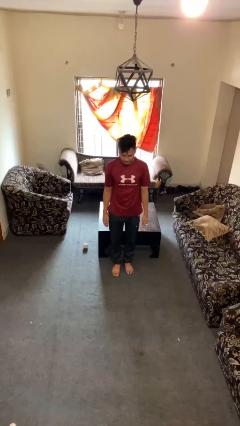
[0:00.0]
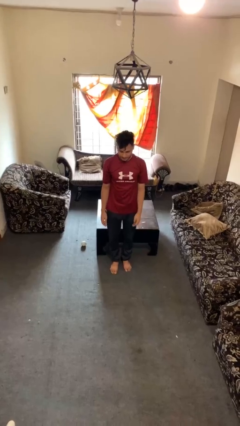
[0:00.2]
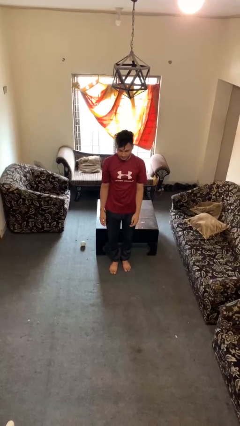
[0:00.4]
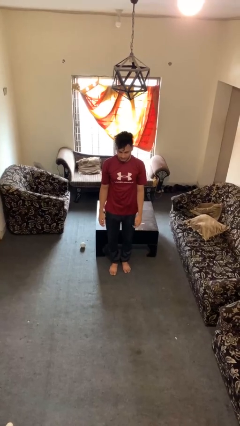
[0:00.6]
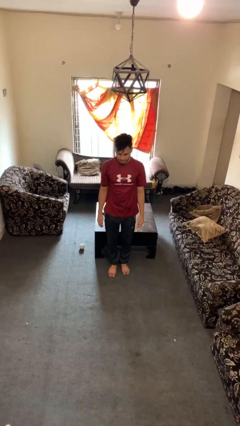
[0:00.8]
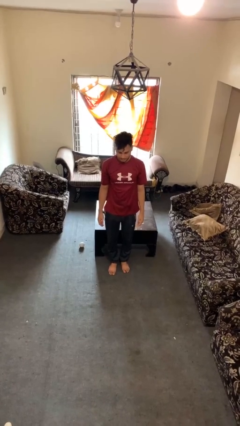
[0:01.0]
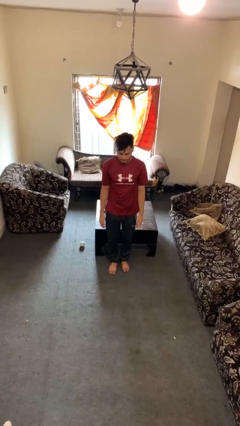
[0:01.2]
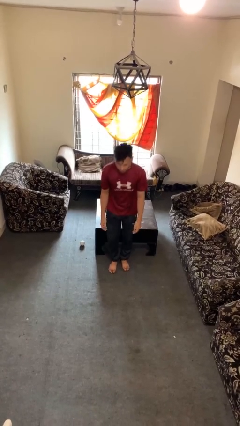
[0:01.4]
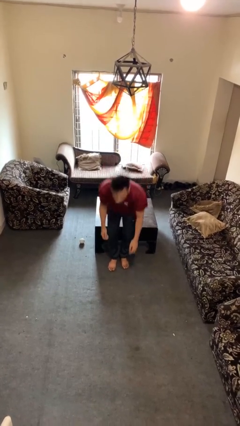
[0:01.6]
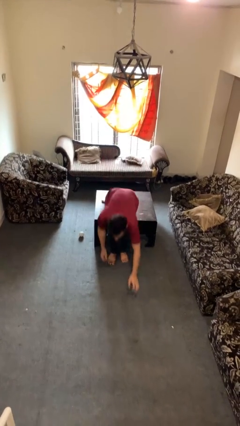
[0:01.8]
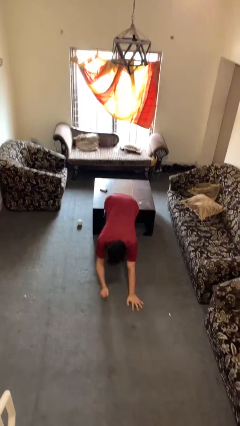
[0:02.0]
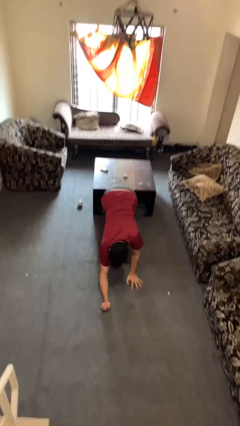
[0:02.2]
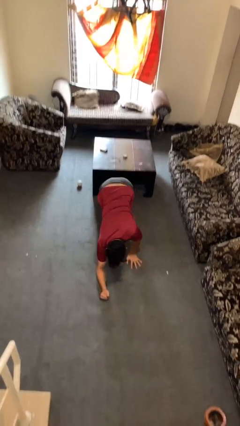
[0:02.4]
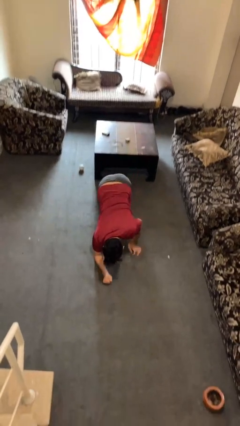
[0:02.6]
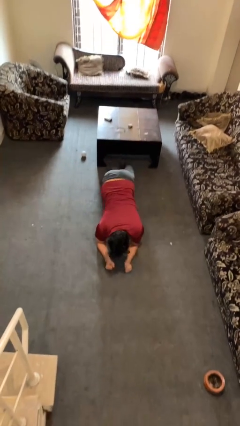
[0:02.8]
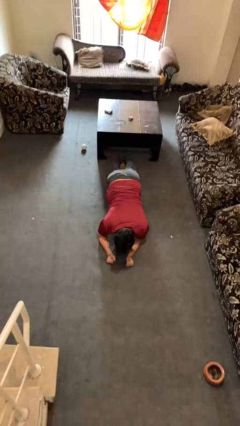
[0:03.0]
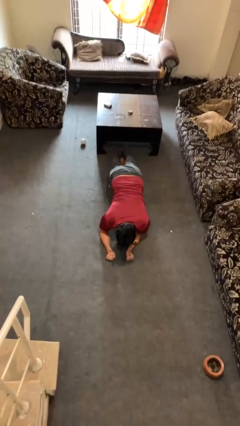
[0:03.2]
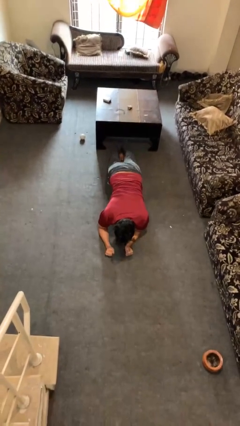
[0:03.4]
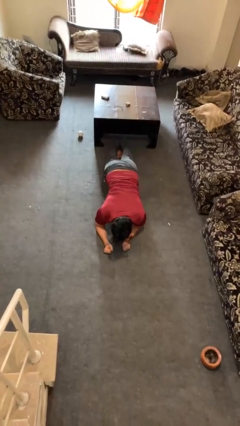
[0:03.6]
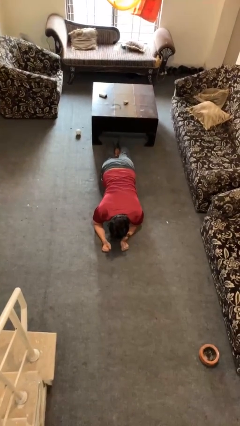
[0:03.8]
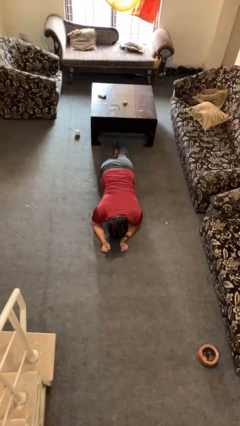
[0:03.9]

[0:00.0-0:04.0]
person exercises with plank

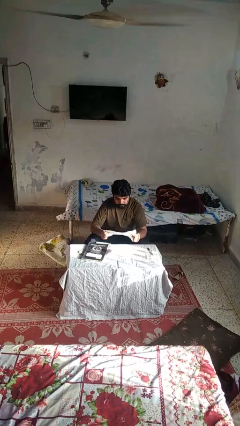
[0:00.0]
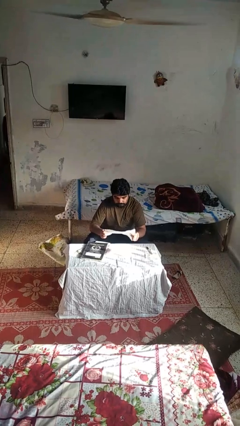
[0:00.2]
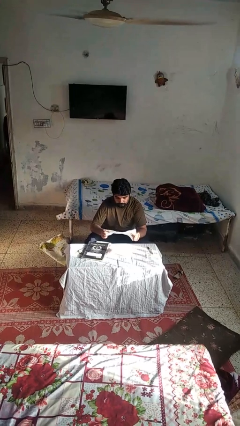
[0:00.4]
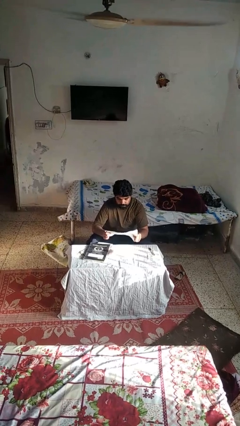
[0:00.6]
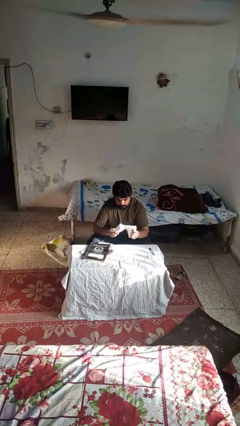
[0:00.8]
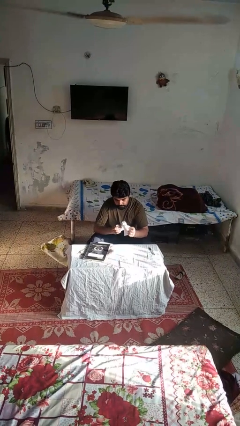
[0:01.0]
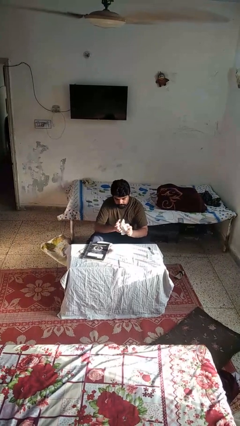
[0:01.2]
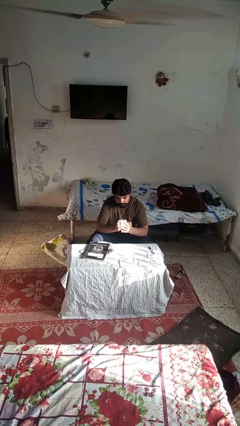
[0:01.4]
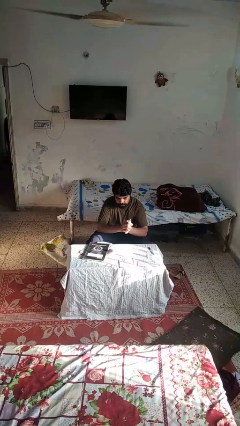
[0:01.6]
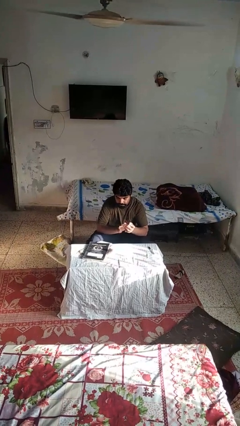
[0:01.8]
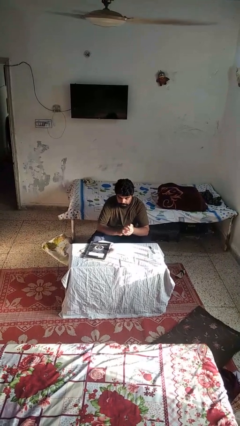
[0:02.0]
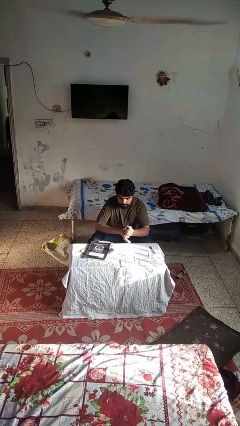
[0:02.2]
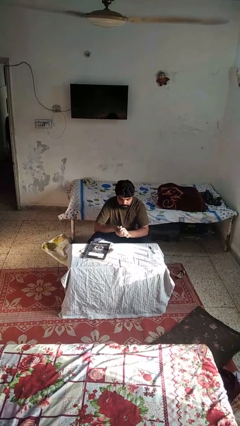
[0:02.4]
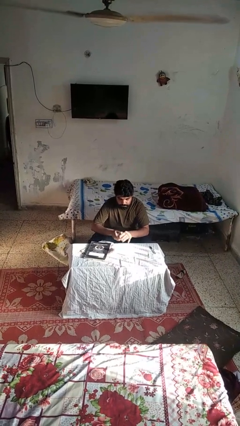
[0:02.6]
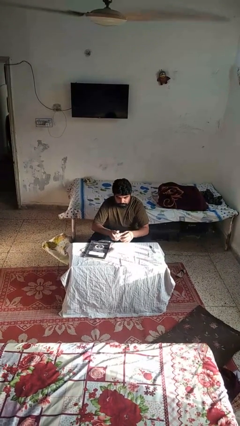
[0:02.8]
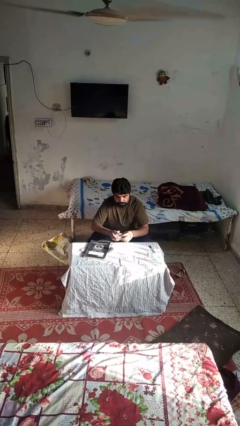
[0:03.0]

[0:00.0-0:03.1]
person crumples paper

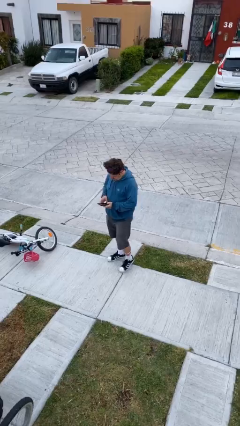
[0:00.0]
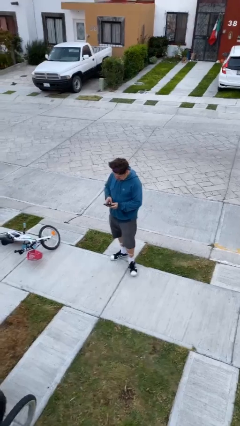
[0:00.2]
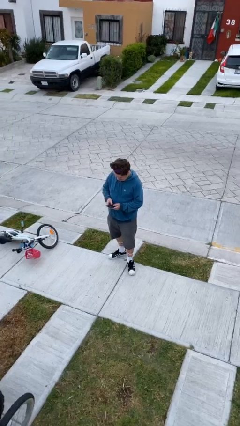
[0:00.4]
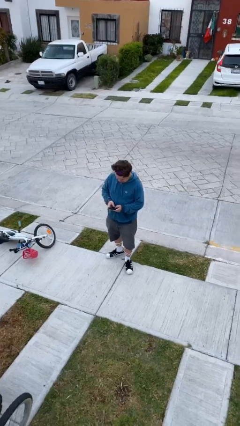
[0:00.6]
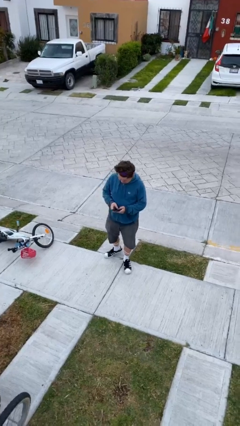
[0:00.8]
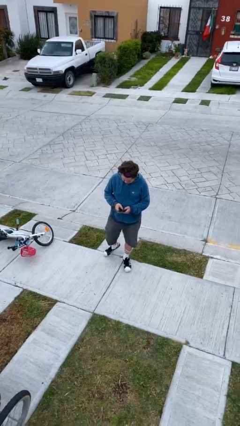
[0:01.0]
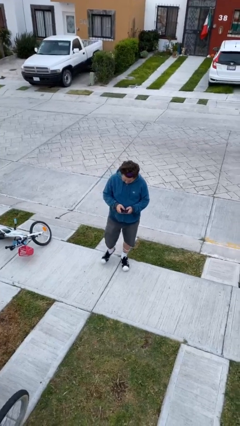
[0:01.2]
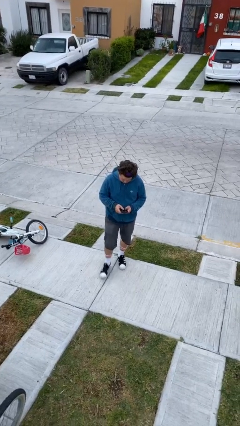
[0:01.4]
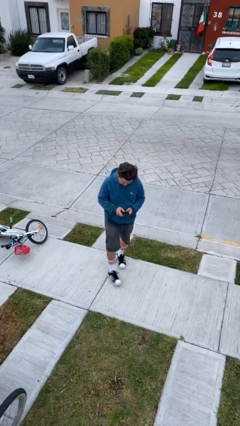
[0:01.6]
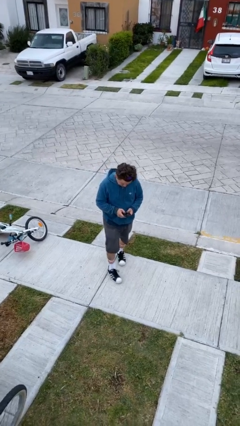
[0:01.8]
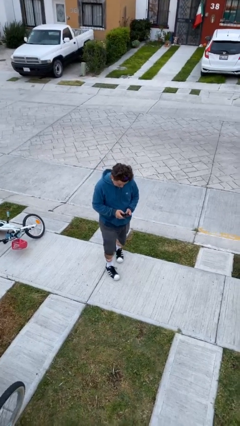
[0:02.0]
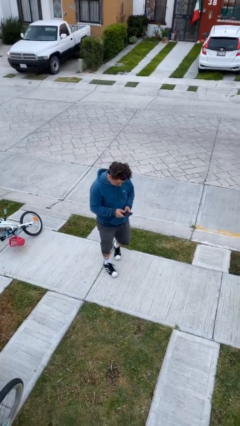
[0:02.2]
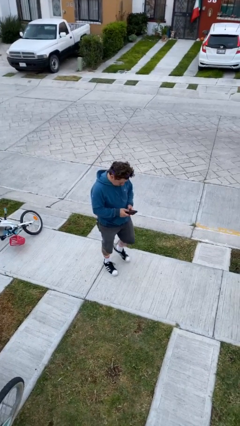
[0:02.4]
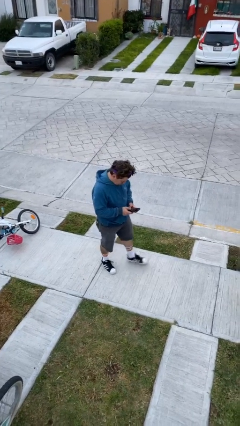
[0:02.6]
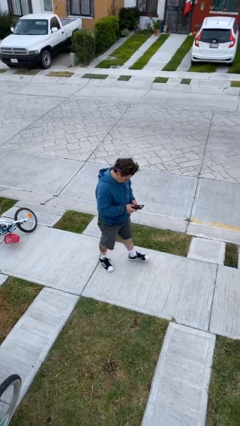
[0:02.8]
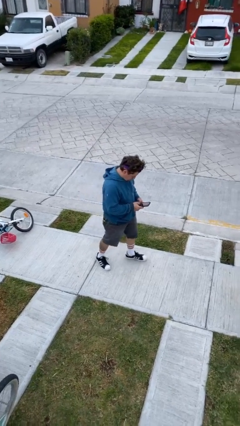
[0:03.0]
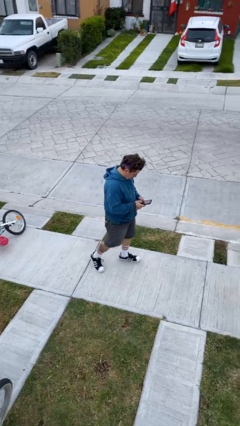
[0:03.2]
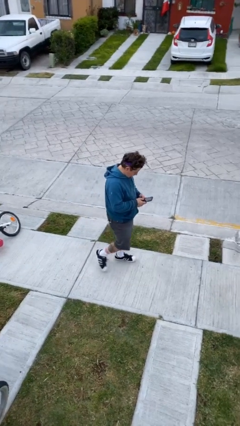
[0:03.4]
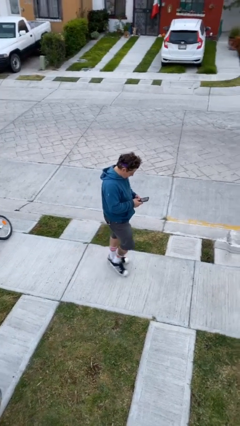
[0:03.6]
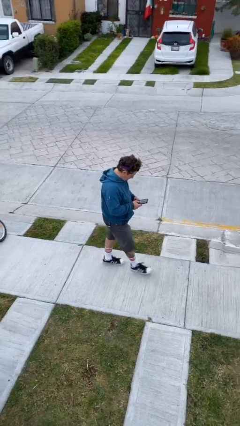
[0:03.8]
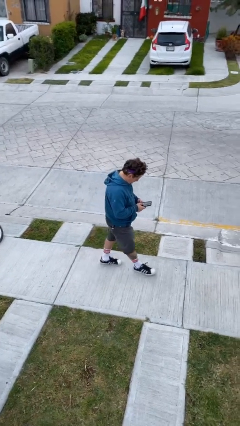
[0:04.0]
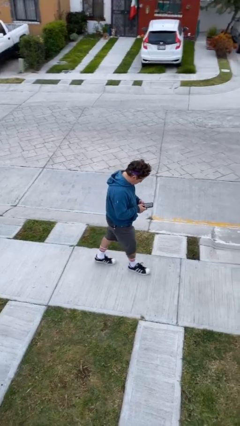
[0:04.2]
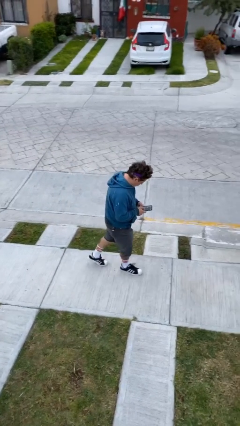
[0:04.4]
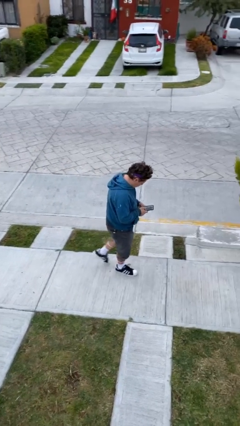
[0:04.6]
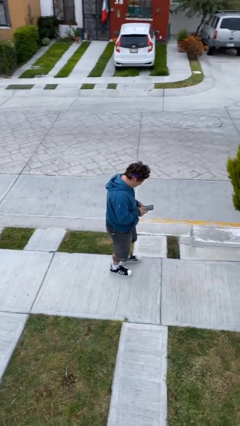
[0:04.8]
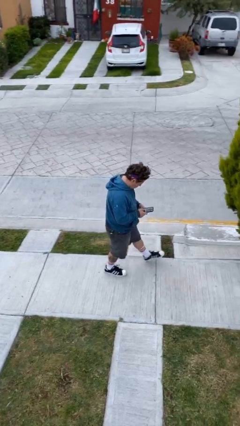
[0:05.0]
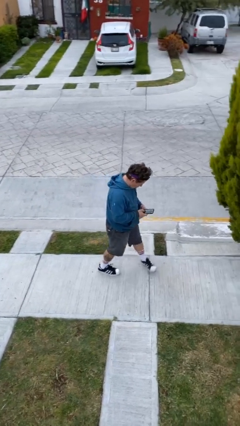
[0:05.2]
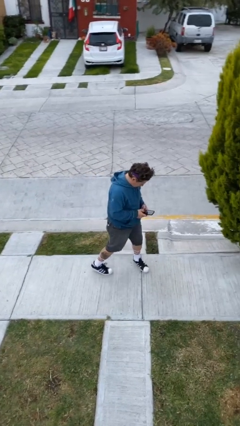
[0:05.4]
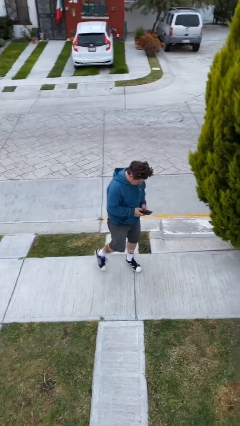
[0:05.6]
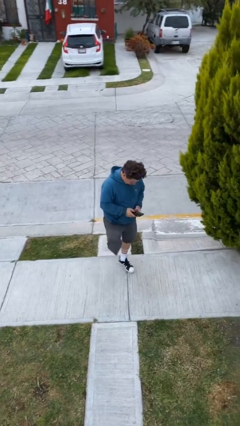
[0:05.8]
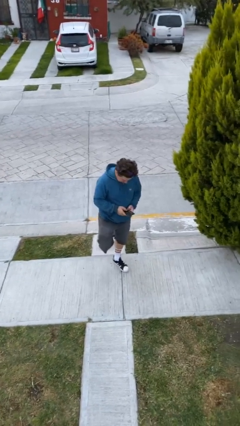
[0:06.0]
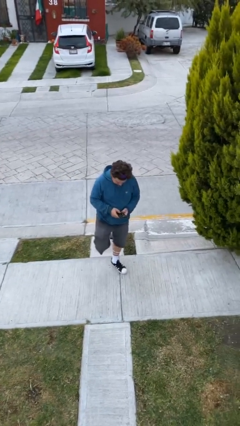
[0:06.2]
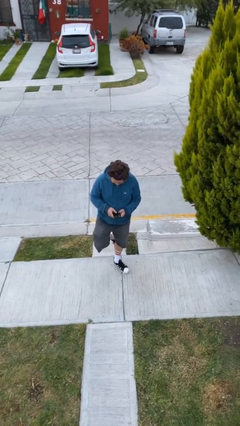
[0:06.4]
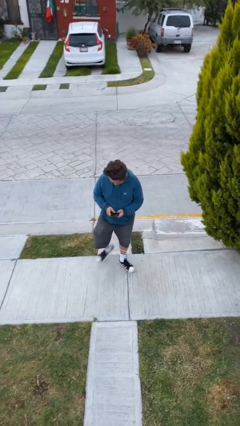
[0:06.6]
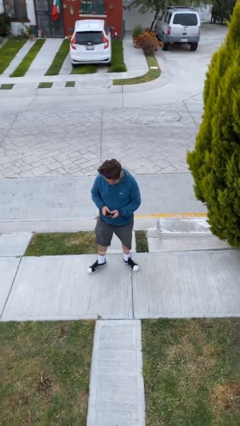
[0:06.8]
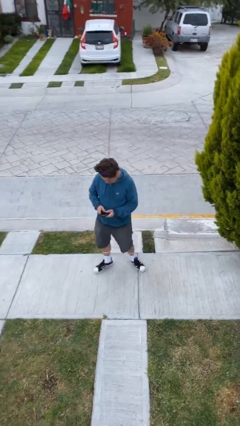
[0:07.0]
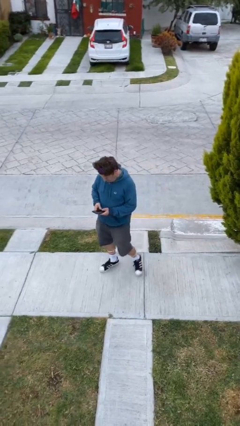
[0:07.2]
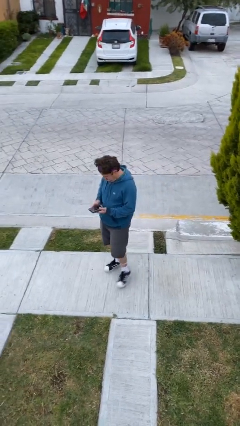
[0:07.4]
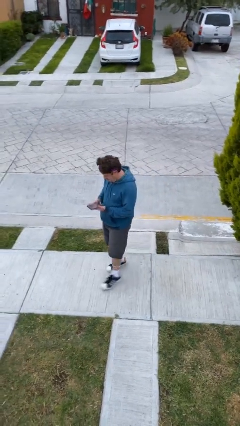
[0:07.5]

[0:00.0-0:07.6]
person texts on phone

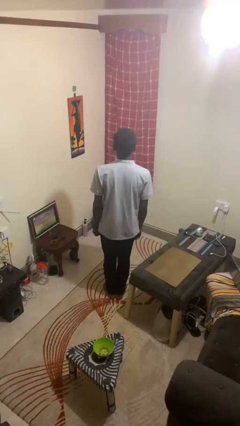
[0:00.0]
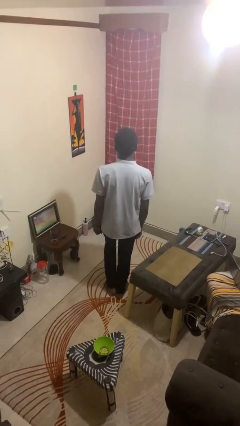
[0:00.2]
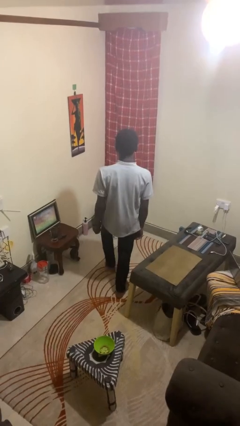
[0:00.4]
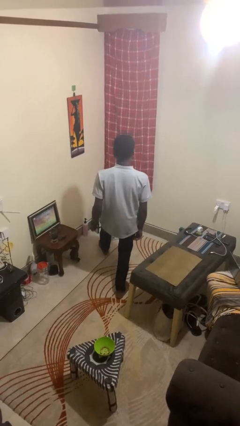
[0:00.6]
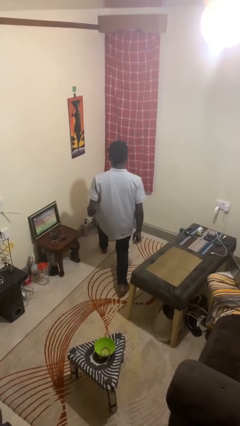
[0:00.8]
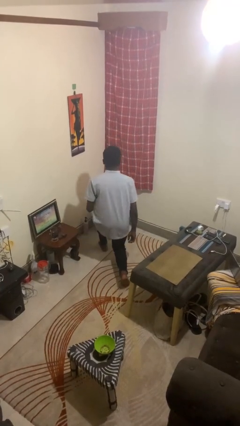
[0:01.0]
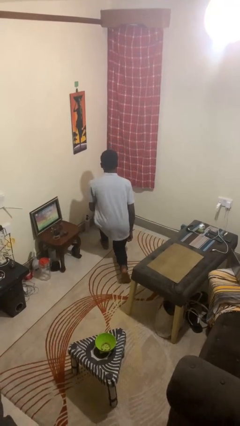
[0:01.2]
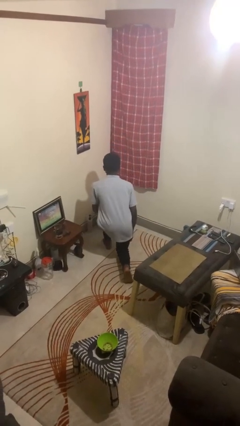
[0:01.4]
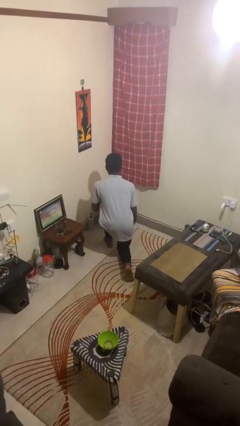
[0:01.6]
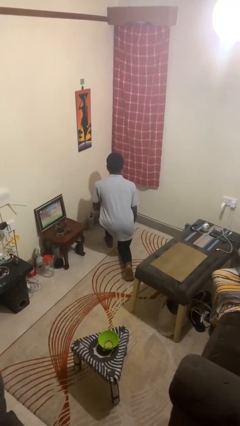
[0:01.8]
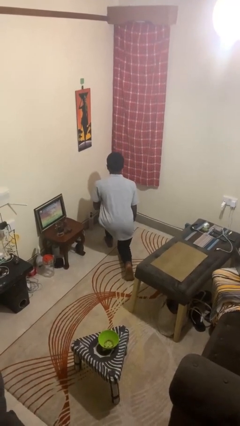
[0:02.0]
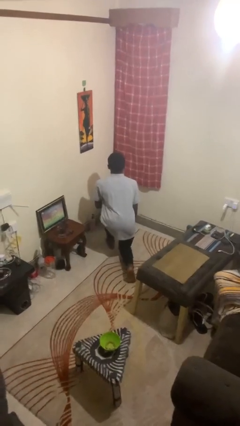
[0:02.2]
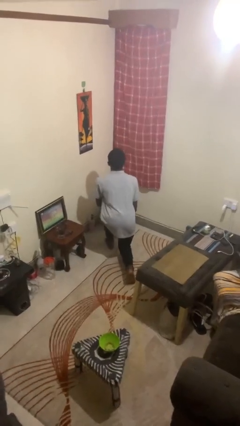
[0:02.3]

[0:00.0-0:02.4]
person exercises with lunges

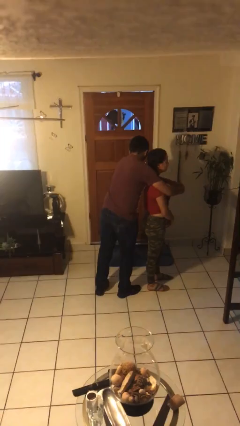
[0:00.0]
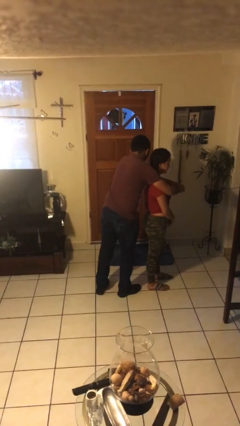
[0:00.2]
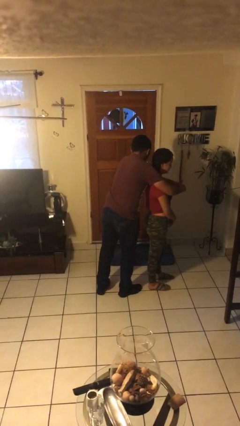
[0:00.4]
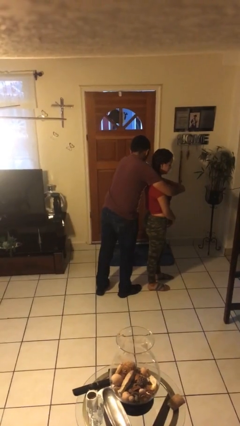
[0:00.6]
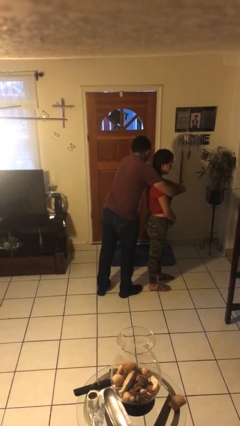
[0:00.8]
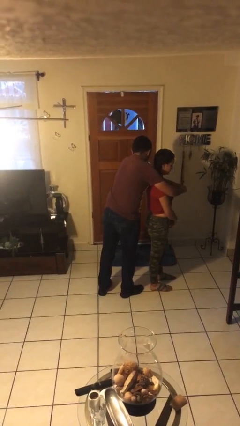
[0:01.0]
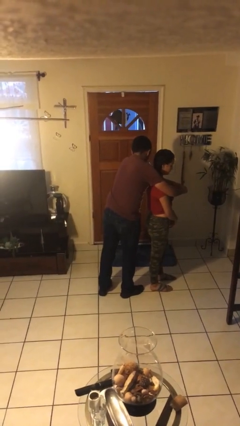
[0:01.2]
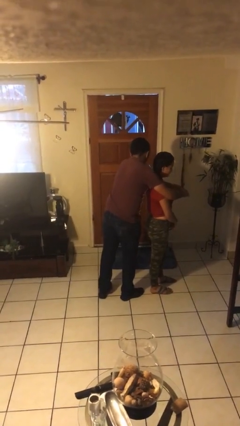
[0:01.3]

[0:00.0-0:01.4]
person hugs person from behind
